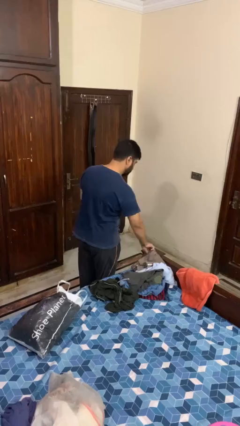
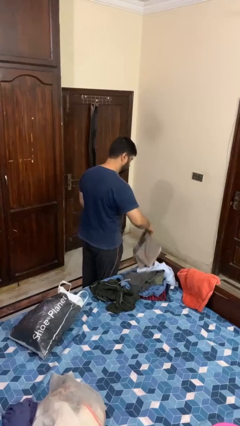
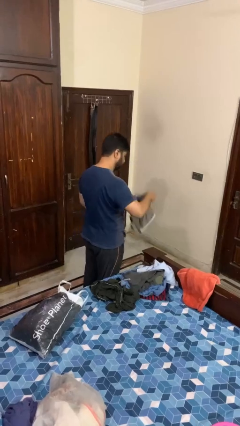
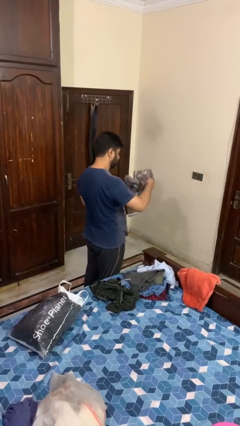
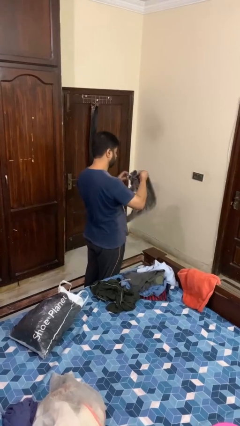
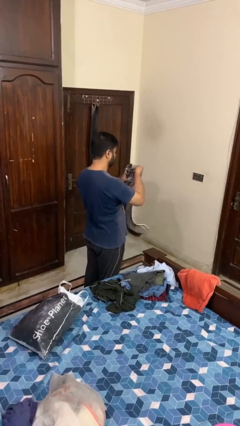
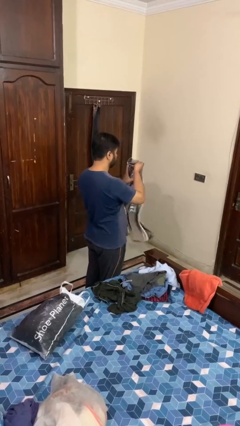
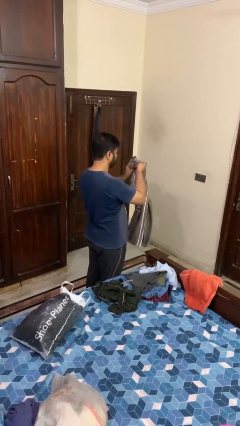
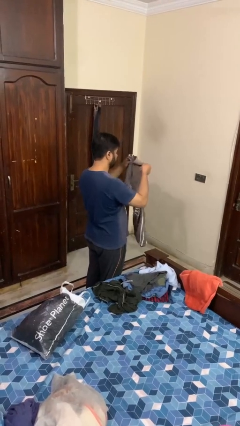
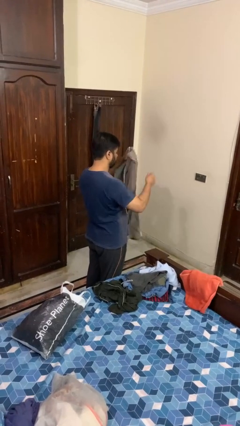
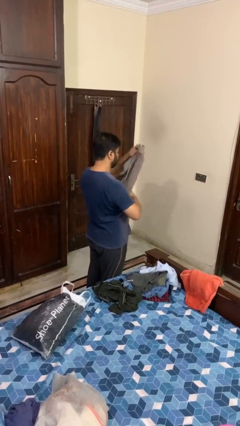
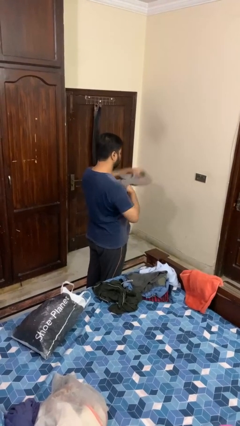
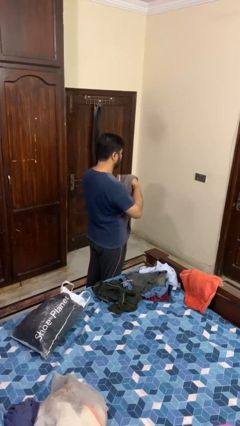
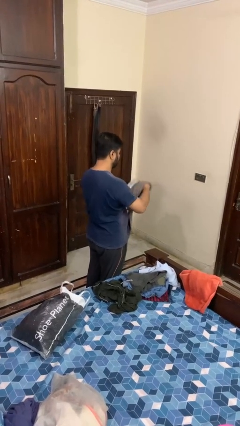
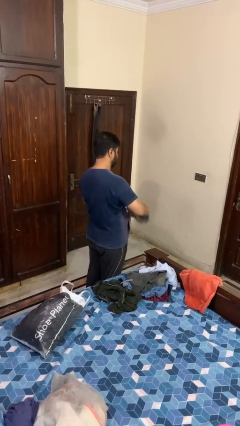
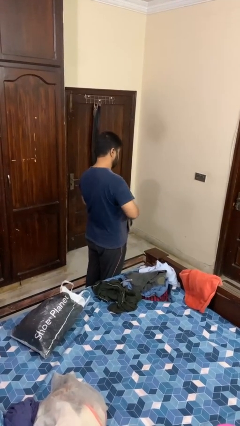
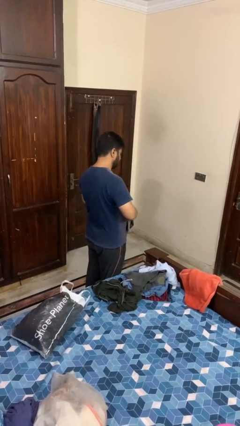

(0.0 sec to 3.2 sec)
person folds pants

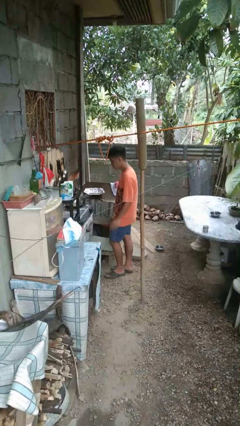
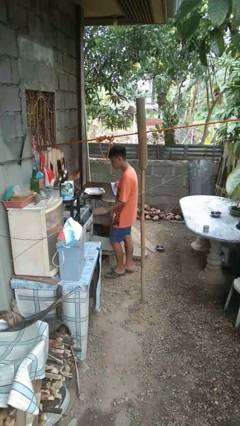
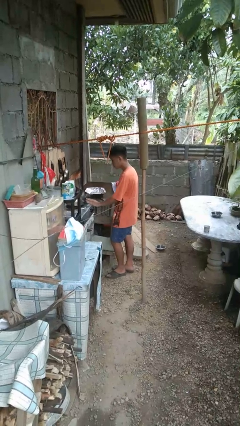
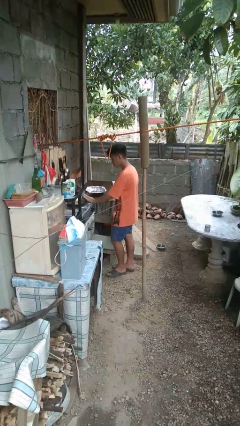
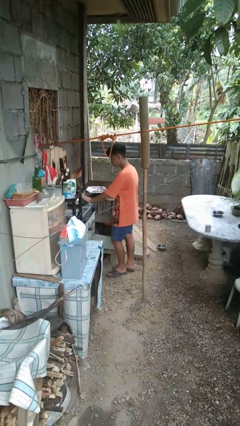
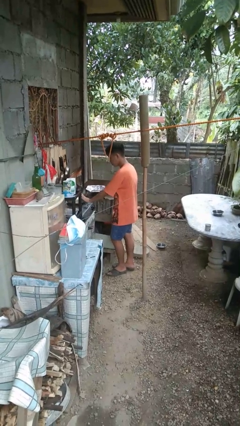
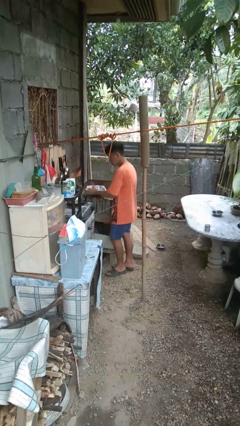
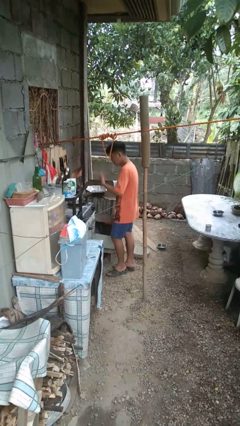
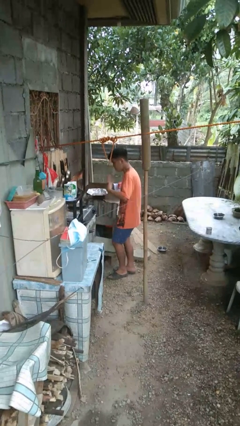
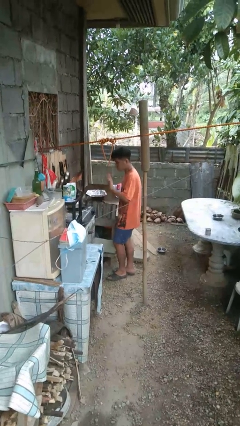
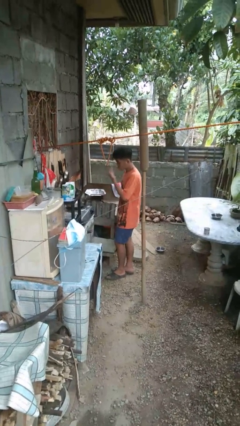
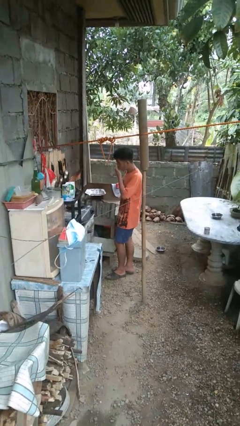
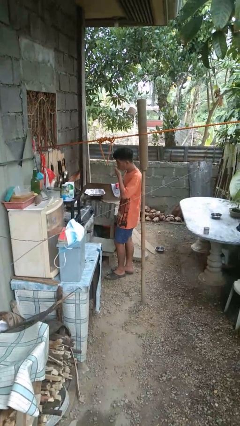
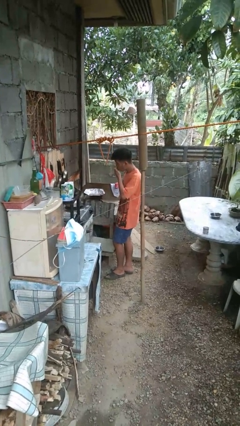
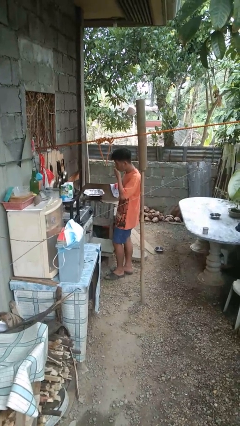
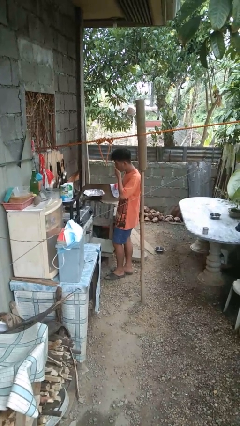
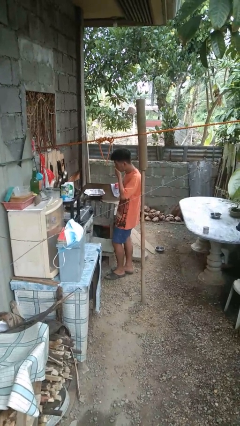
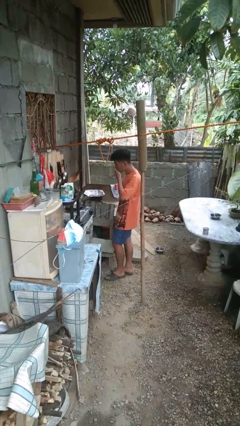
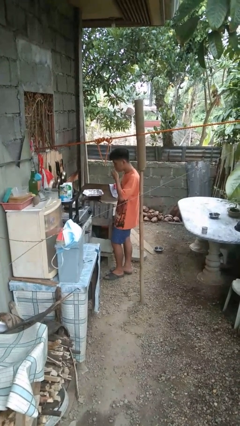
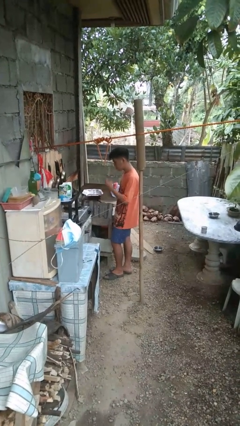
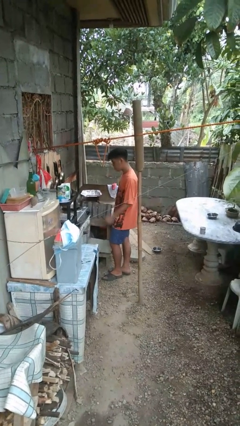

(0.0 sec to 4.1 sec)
person burns hand

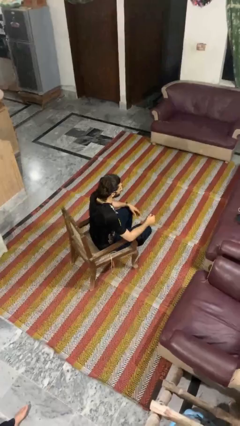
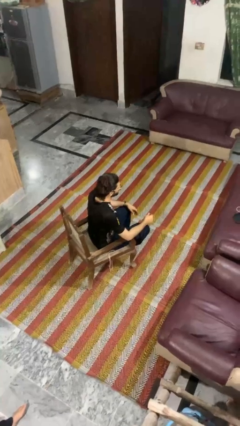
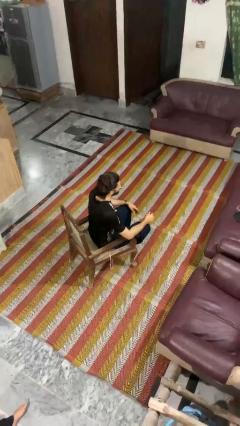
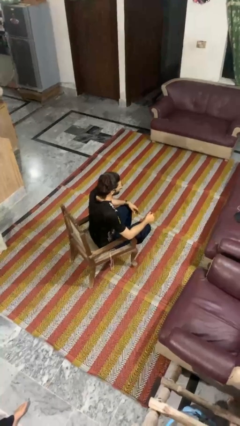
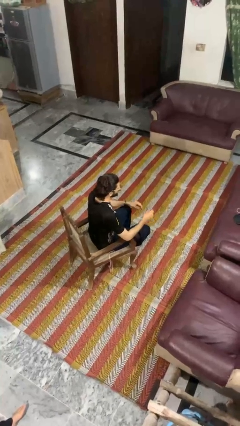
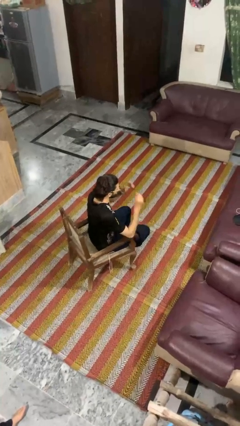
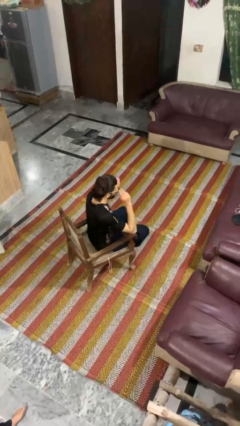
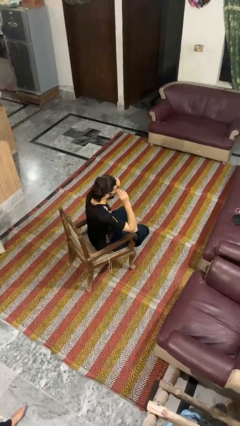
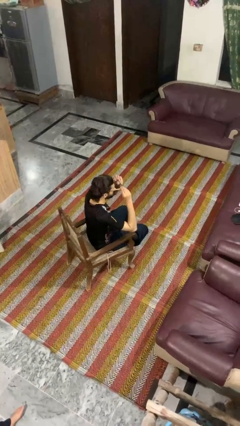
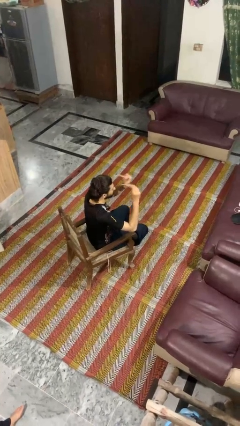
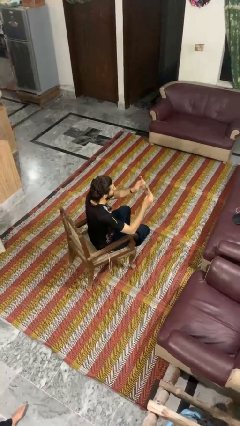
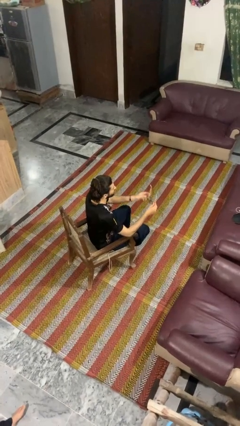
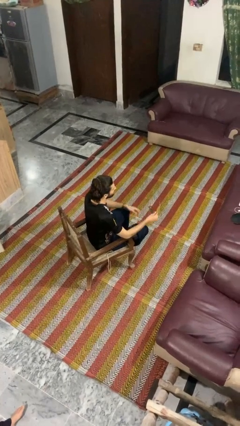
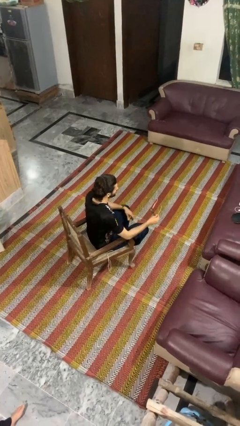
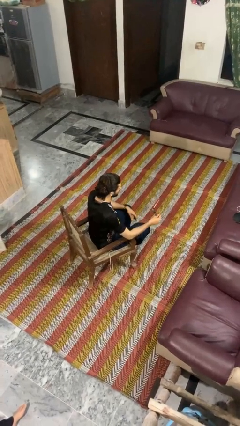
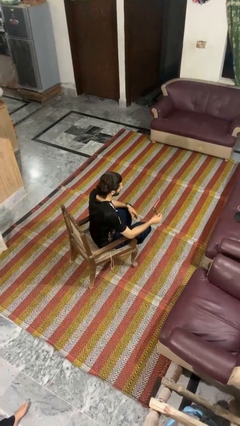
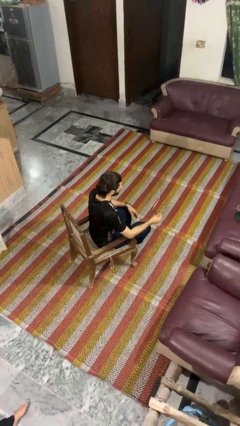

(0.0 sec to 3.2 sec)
person takes off glasses

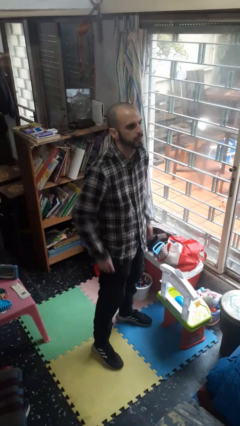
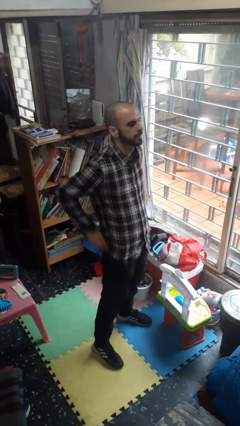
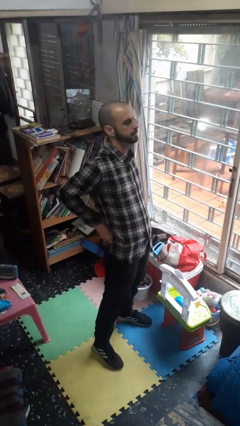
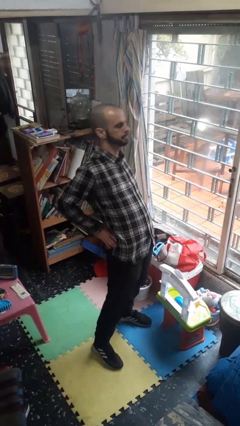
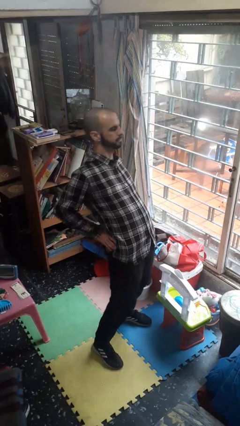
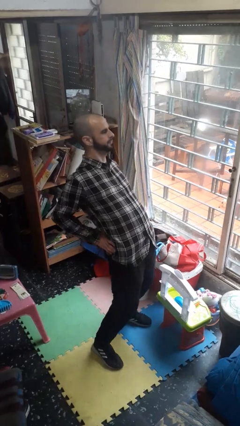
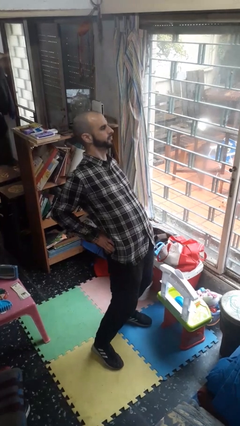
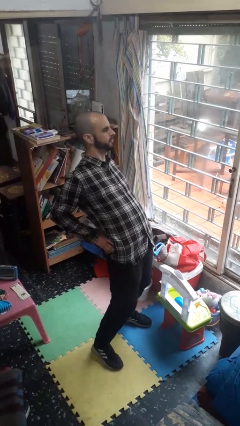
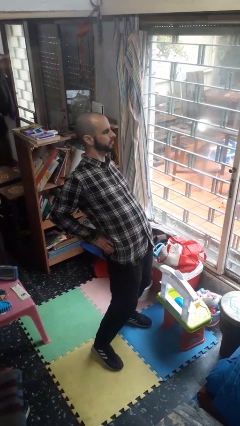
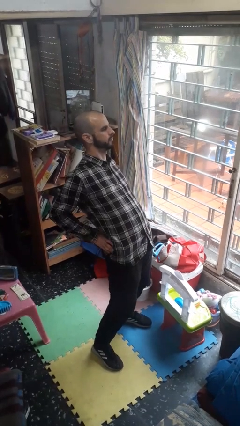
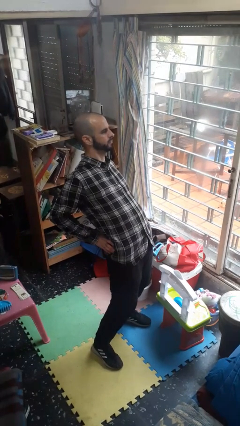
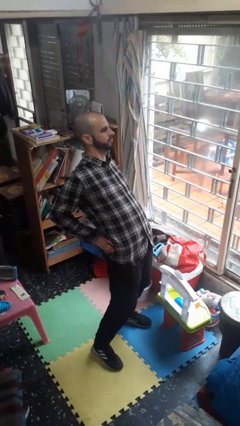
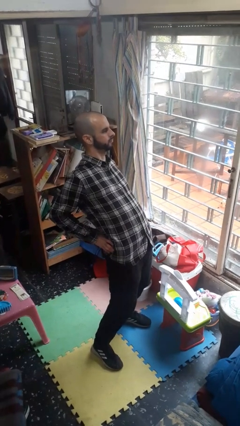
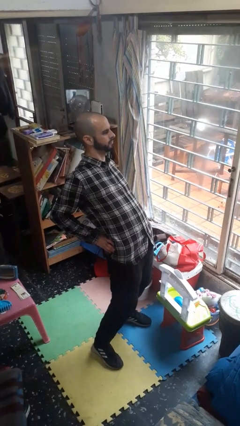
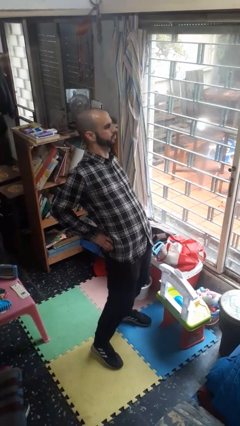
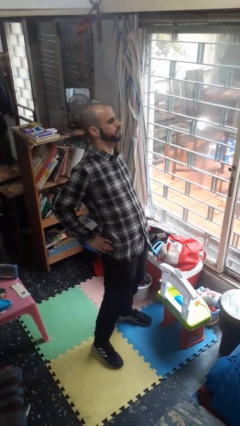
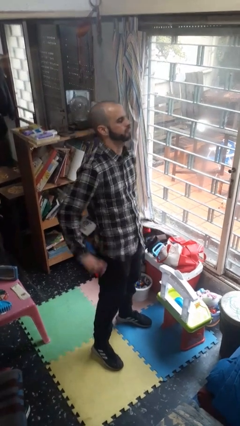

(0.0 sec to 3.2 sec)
person stretches back

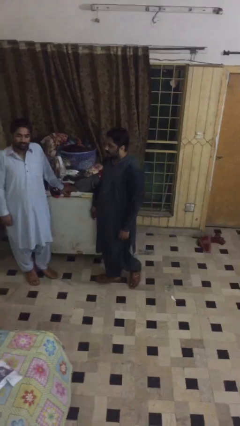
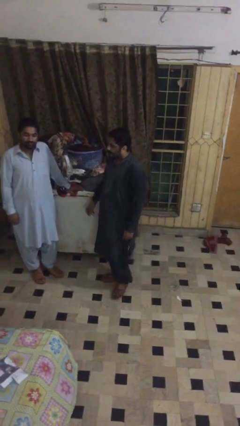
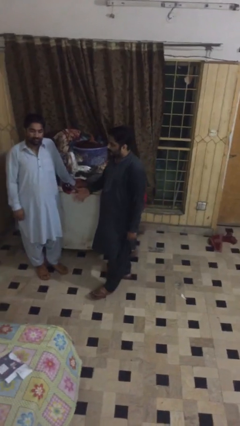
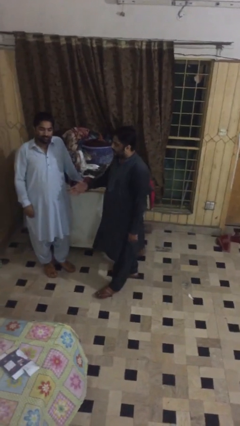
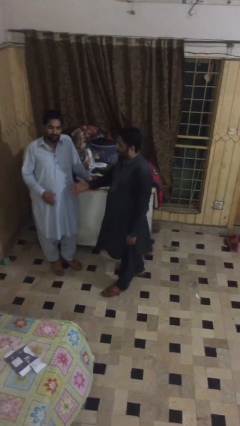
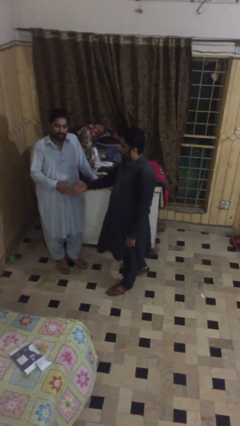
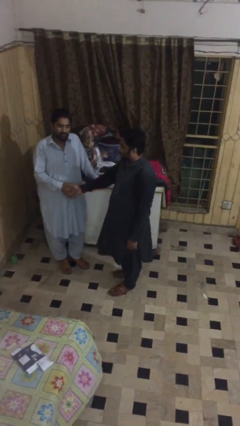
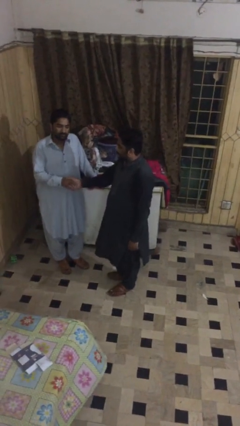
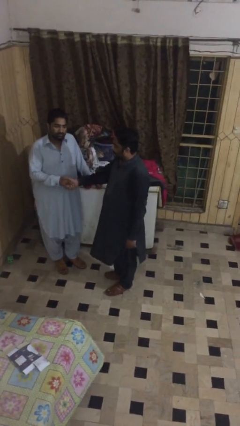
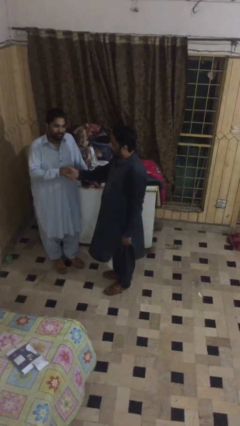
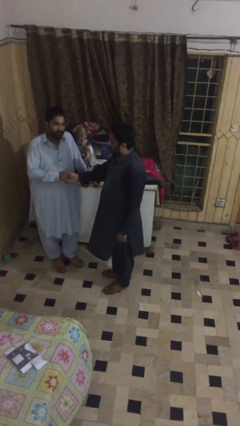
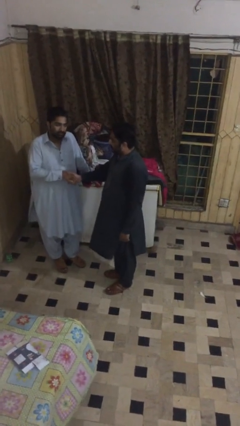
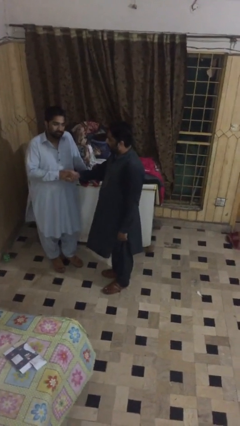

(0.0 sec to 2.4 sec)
person shakes hand

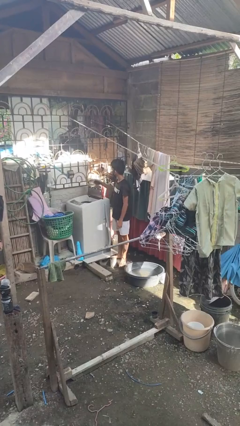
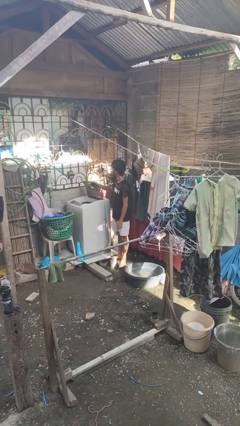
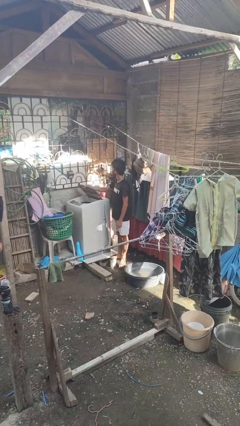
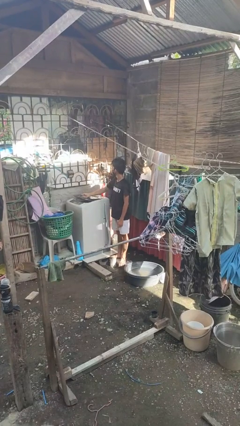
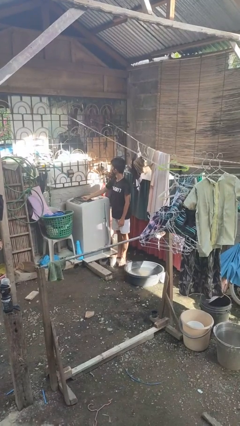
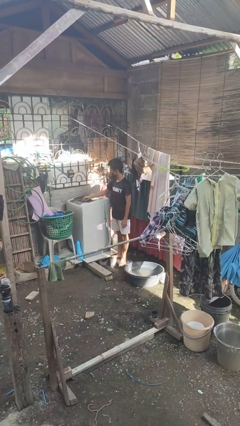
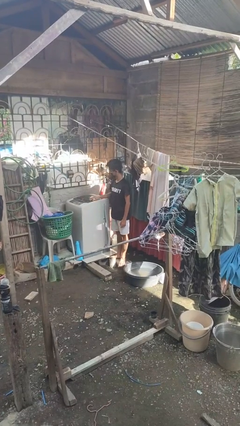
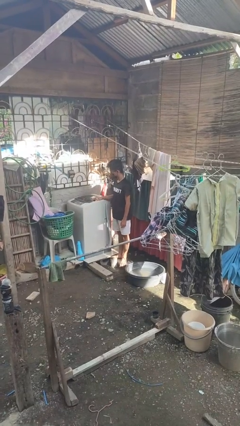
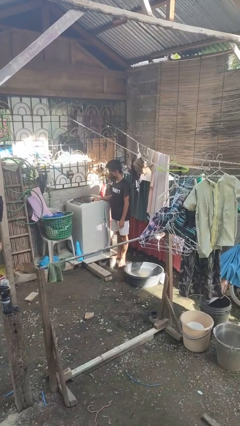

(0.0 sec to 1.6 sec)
person closes clothes washer
